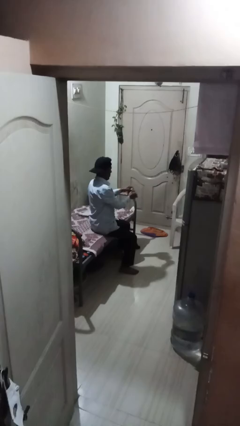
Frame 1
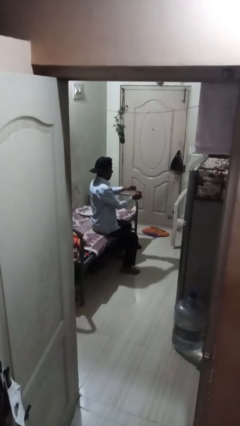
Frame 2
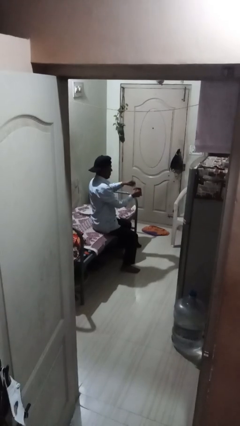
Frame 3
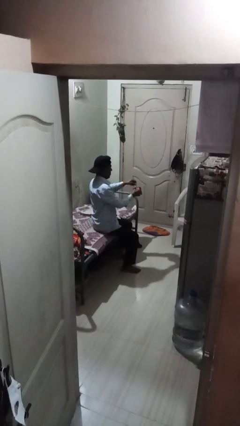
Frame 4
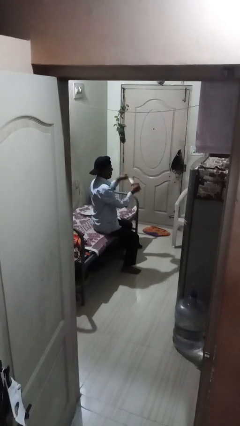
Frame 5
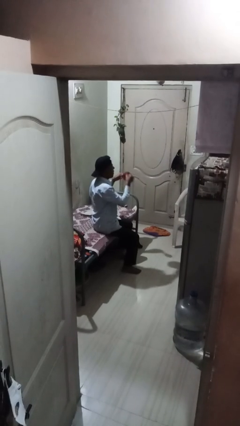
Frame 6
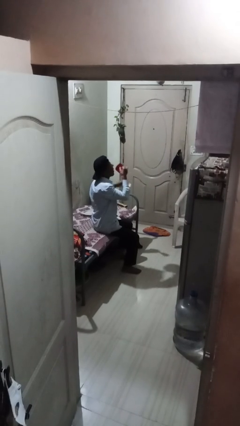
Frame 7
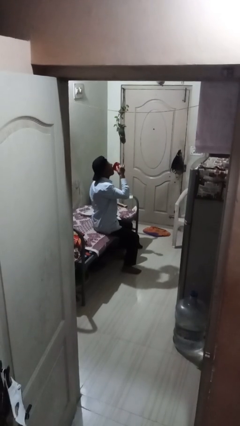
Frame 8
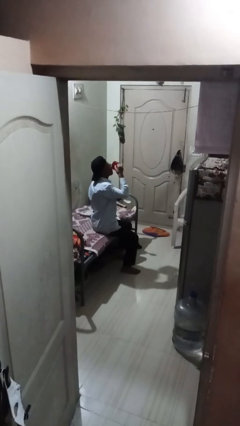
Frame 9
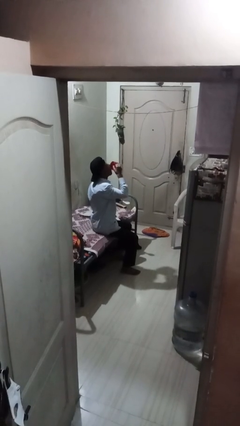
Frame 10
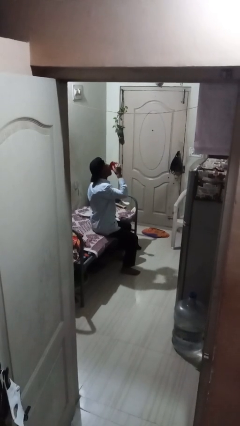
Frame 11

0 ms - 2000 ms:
person drinks from mug

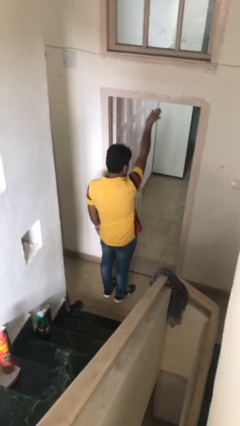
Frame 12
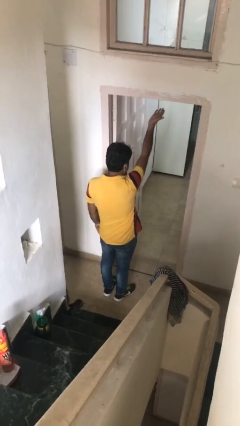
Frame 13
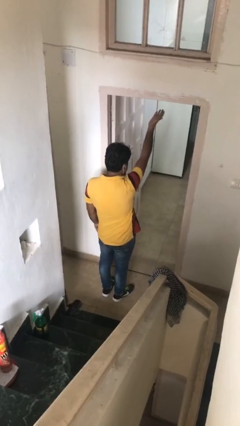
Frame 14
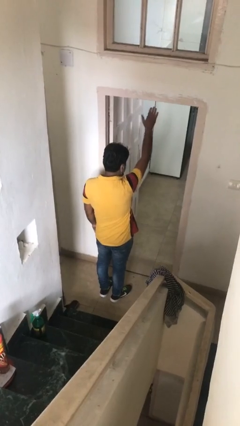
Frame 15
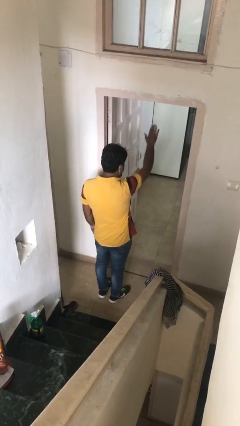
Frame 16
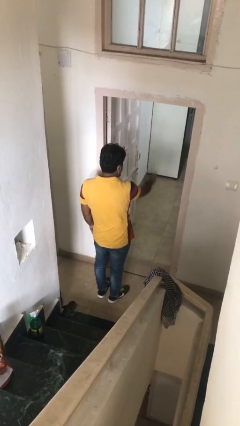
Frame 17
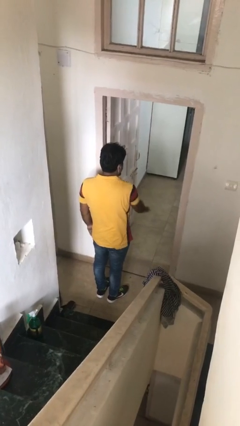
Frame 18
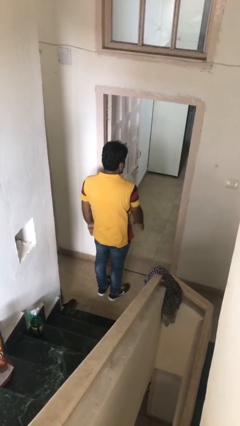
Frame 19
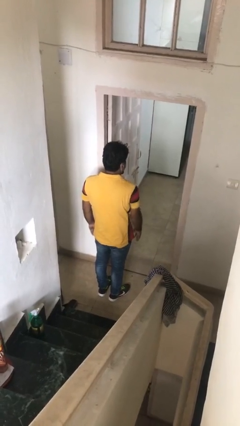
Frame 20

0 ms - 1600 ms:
person gestures swipe down

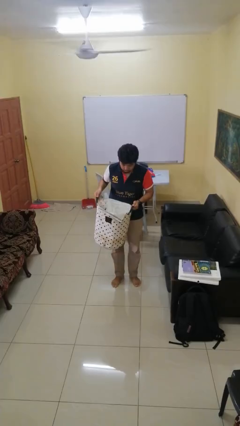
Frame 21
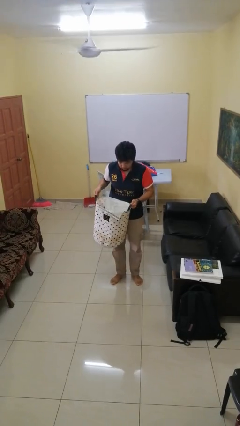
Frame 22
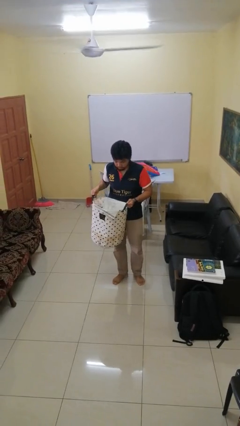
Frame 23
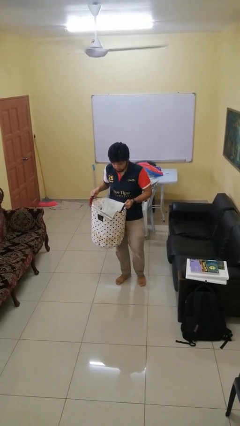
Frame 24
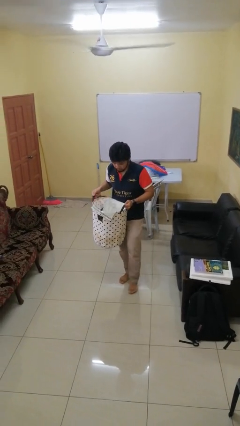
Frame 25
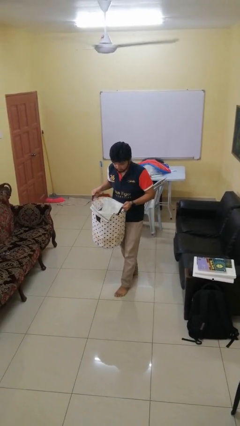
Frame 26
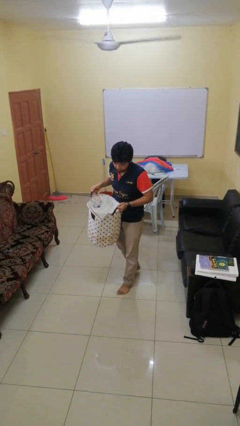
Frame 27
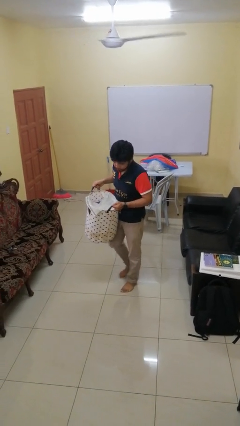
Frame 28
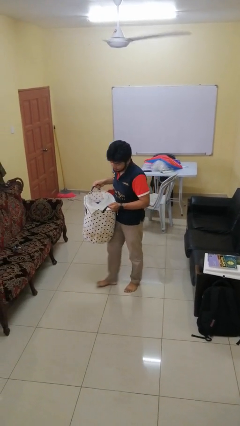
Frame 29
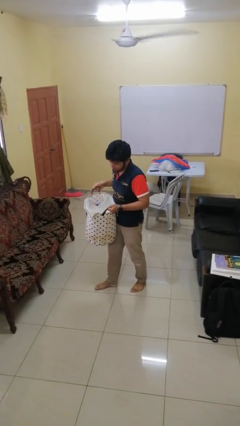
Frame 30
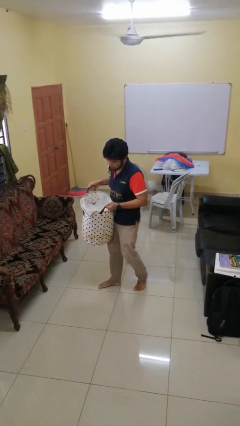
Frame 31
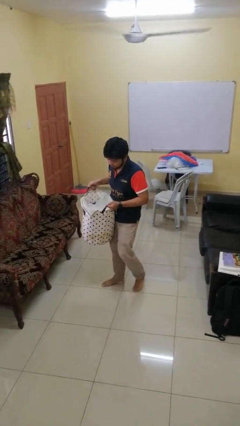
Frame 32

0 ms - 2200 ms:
person carries laundry basket

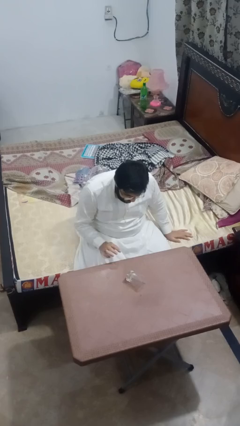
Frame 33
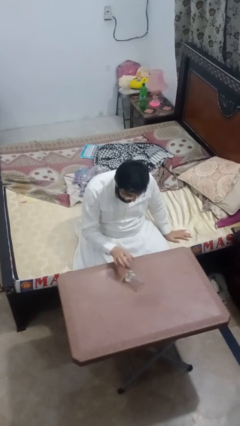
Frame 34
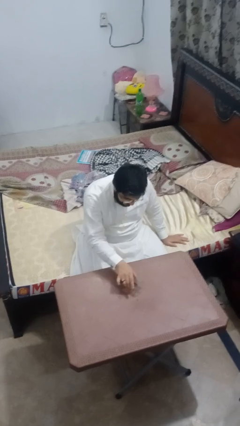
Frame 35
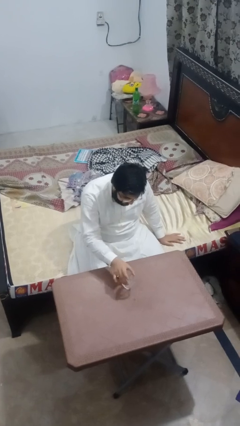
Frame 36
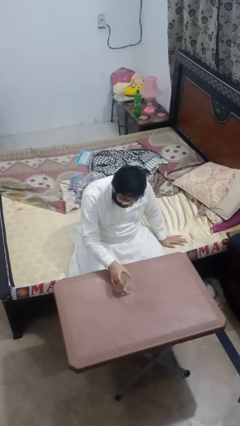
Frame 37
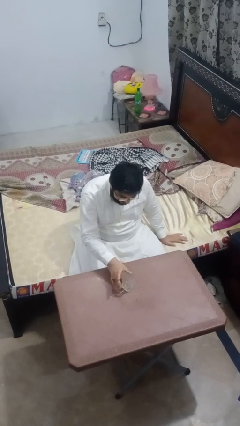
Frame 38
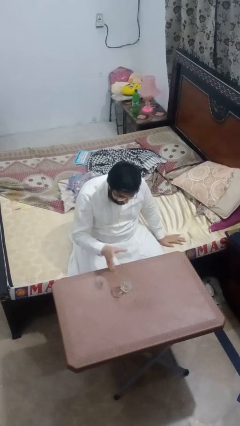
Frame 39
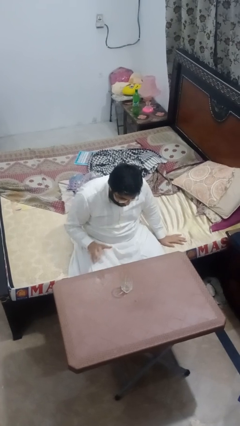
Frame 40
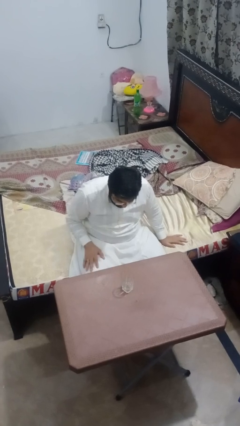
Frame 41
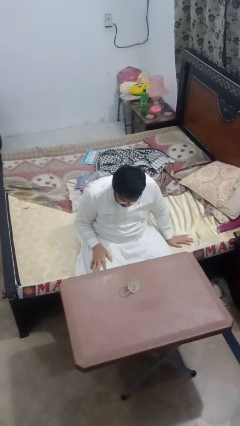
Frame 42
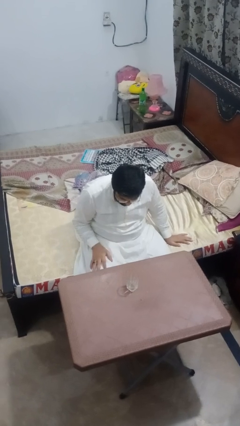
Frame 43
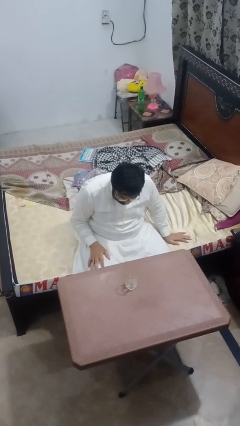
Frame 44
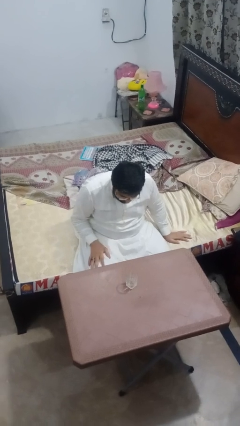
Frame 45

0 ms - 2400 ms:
person sets upright glass

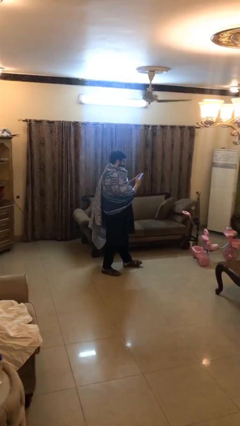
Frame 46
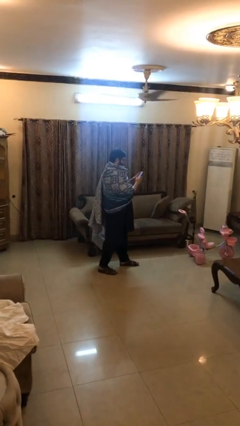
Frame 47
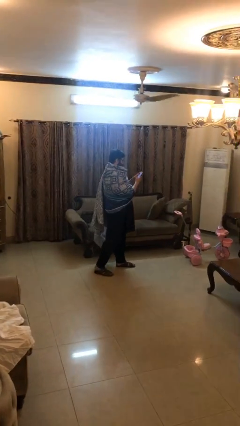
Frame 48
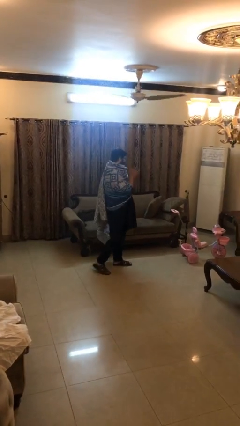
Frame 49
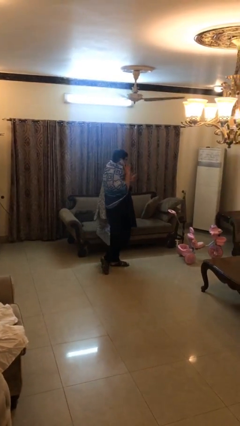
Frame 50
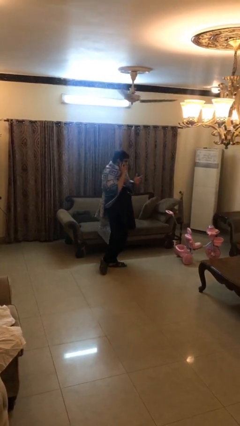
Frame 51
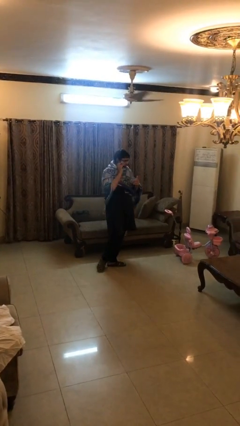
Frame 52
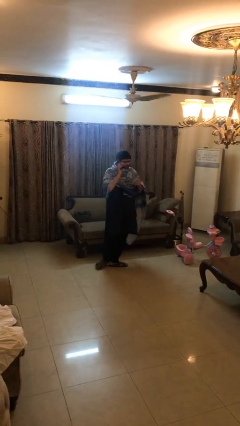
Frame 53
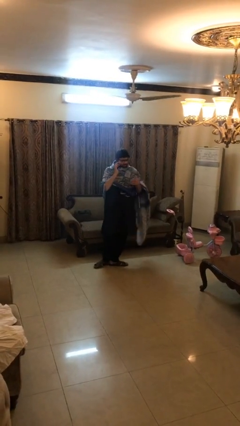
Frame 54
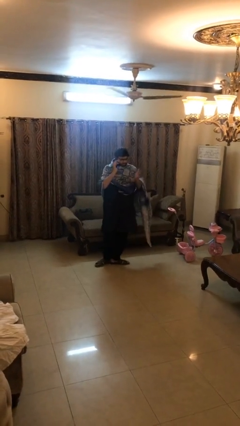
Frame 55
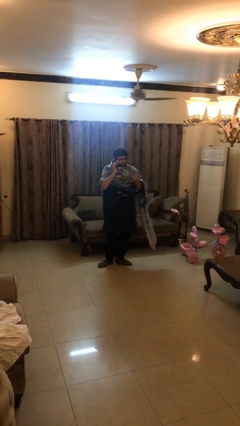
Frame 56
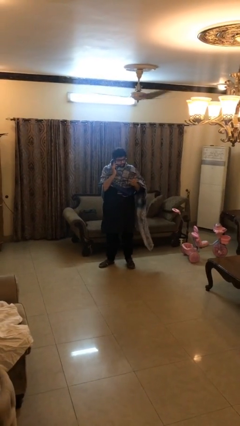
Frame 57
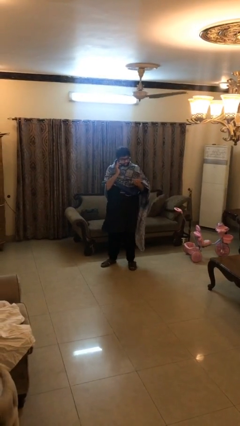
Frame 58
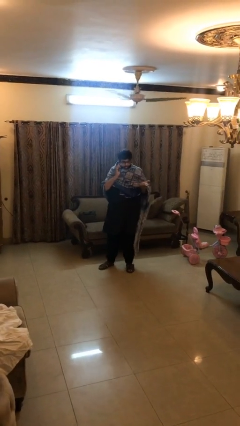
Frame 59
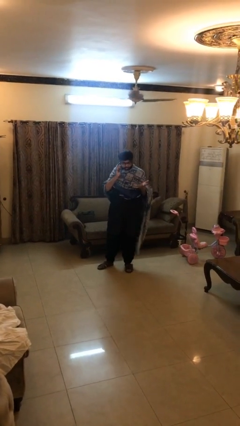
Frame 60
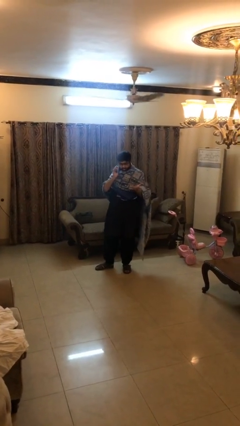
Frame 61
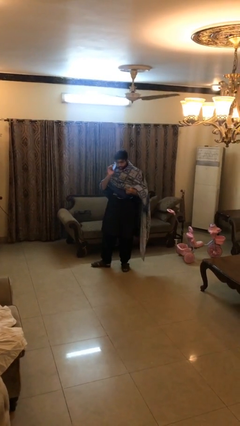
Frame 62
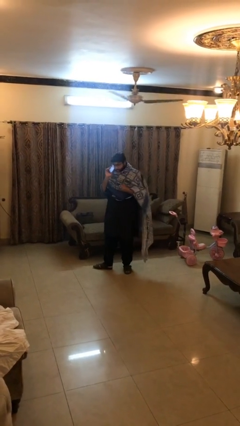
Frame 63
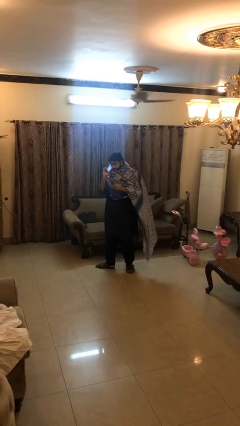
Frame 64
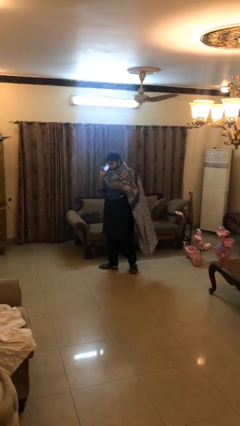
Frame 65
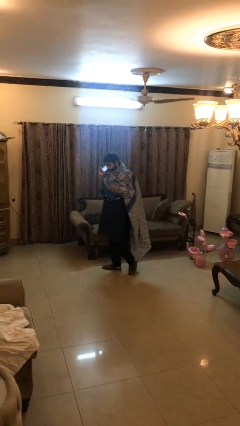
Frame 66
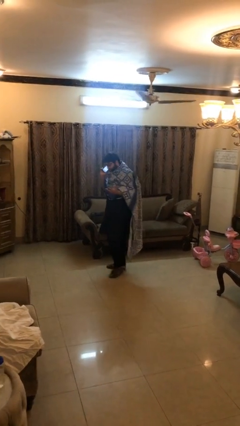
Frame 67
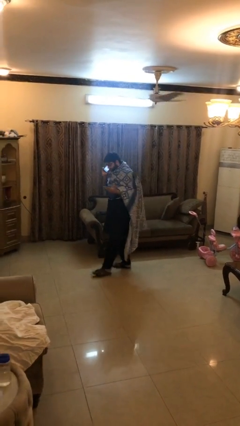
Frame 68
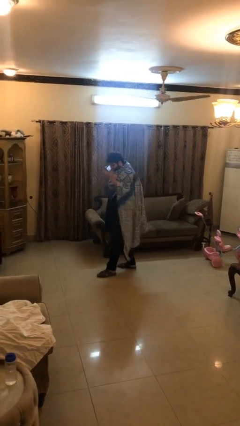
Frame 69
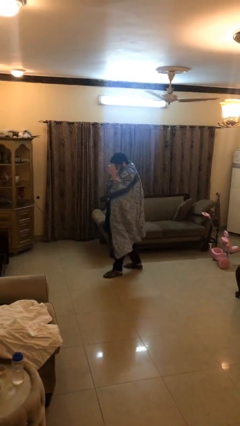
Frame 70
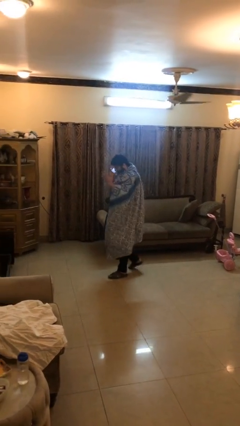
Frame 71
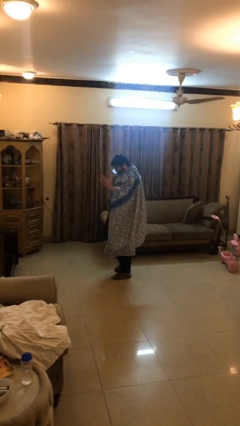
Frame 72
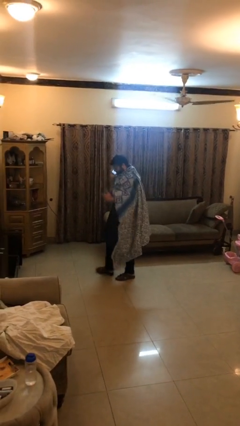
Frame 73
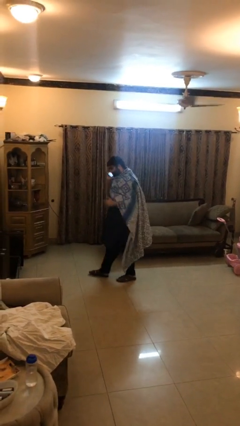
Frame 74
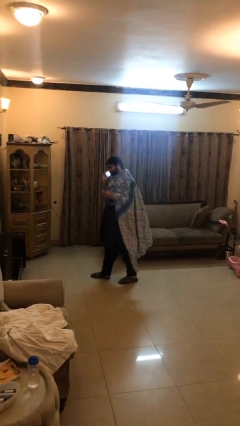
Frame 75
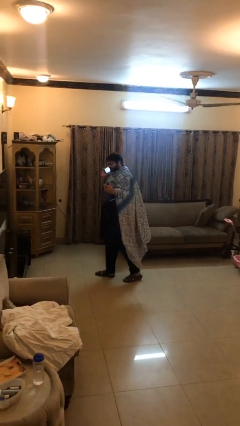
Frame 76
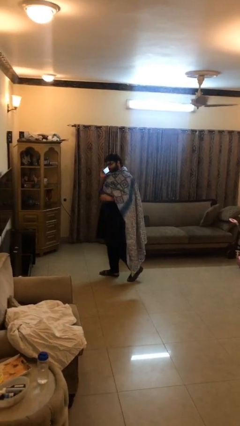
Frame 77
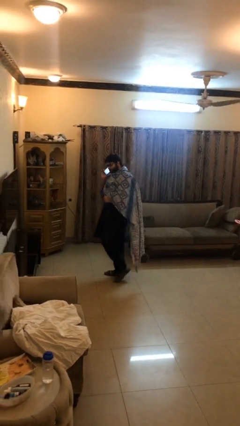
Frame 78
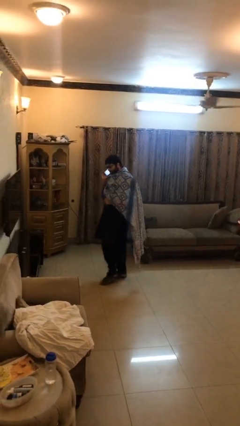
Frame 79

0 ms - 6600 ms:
person talks on phone

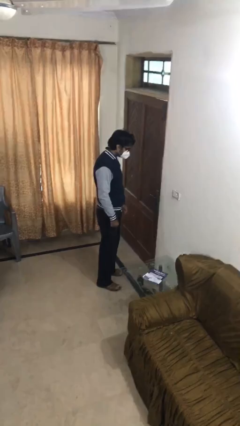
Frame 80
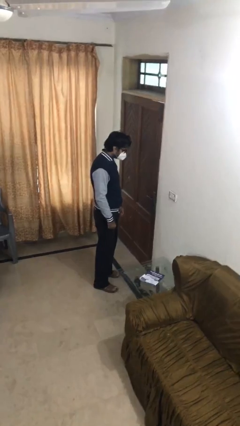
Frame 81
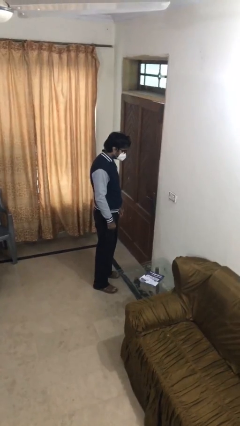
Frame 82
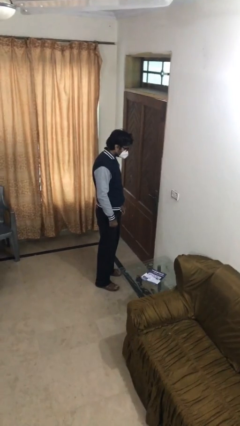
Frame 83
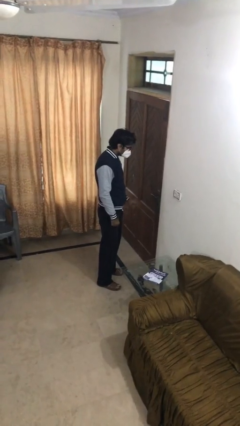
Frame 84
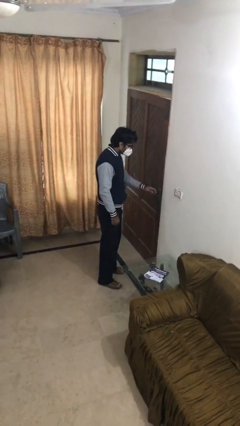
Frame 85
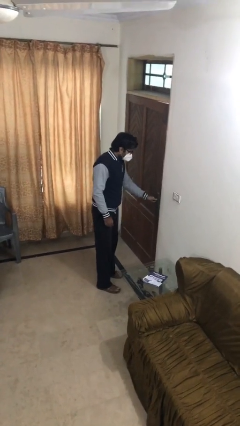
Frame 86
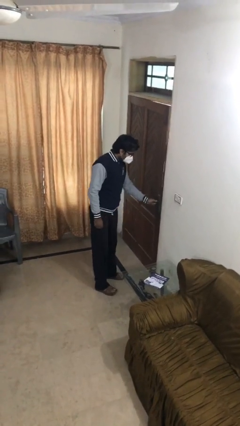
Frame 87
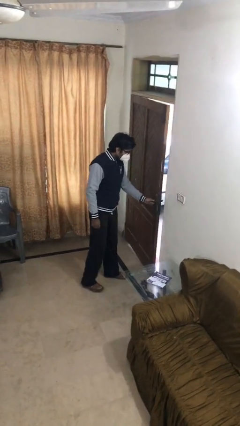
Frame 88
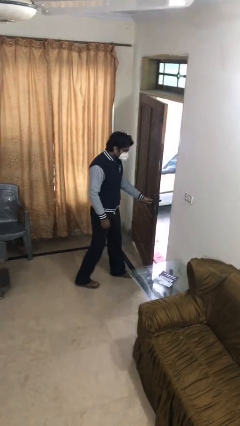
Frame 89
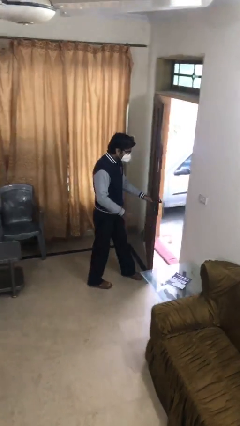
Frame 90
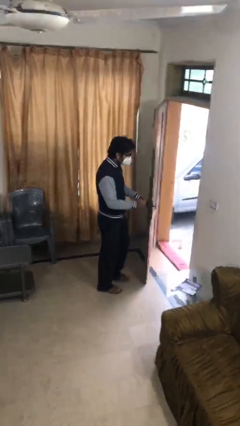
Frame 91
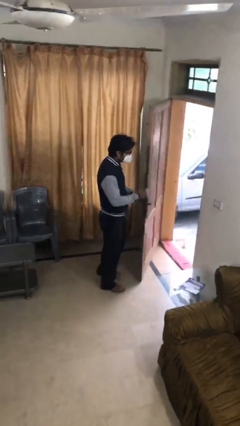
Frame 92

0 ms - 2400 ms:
person opens facility door
